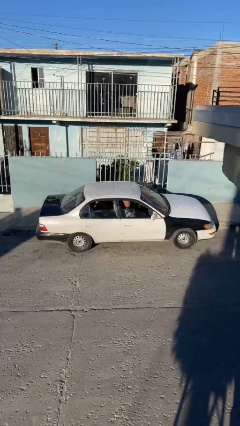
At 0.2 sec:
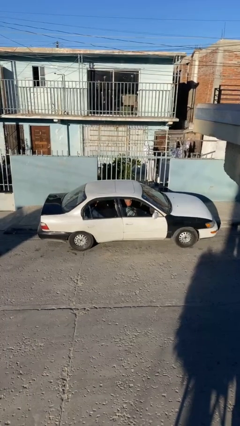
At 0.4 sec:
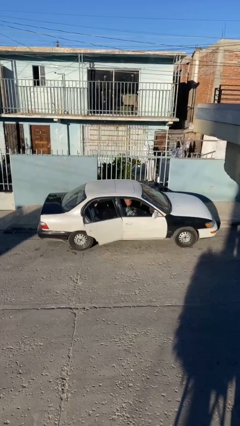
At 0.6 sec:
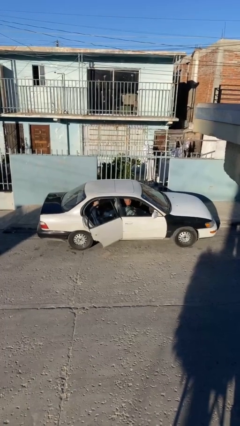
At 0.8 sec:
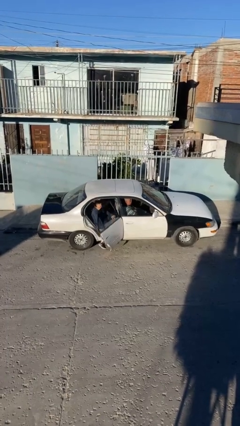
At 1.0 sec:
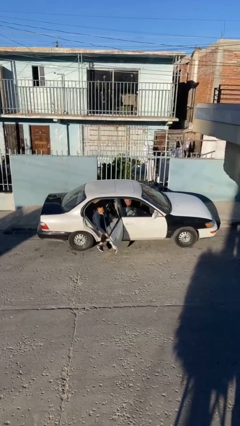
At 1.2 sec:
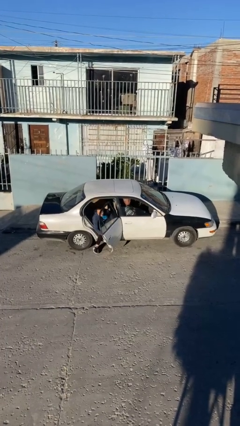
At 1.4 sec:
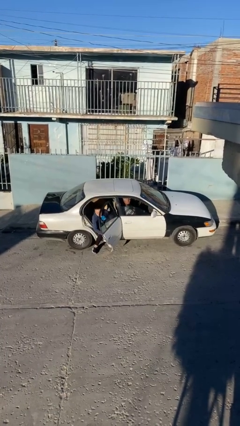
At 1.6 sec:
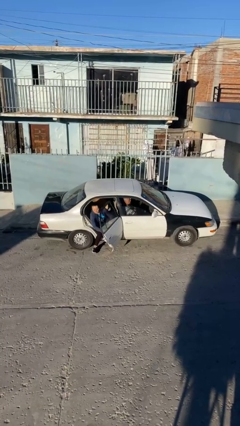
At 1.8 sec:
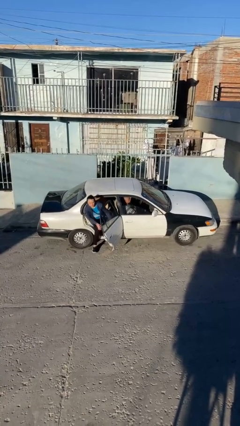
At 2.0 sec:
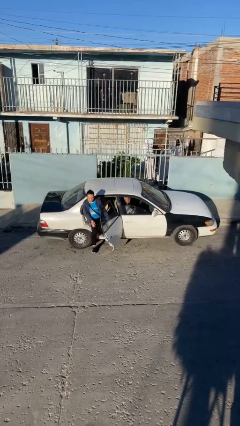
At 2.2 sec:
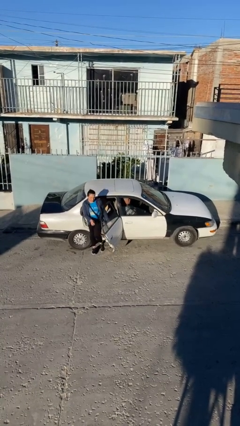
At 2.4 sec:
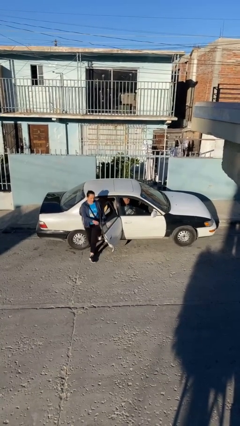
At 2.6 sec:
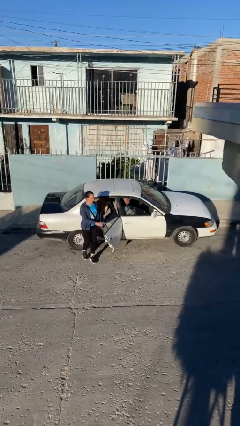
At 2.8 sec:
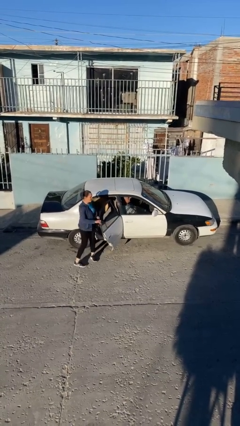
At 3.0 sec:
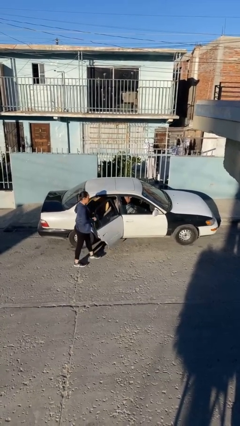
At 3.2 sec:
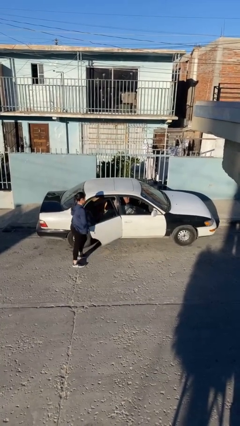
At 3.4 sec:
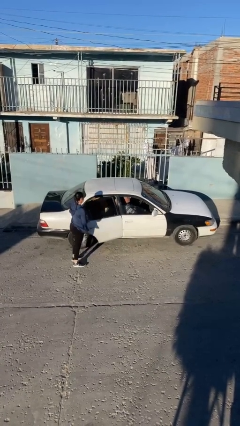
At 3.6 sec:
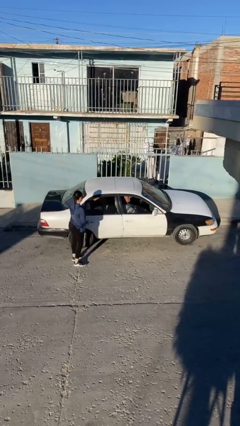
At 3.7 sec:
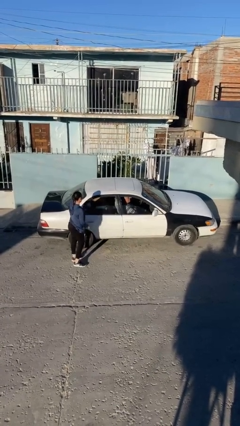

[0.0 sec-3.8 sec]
car drops off person

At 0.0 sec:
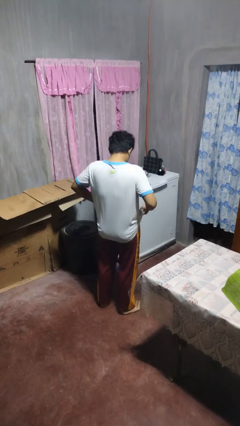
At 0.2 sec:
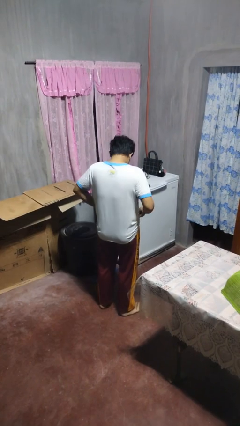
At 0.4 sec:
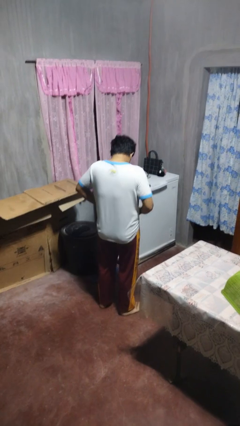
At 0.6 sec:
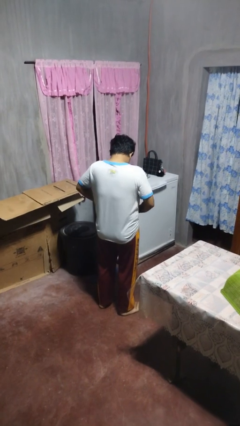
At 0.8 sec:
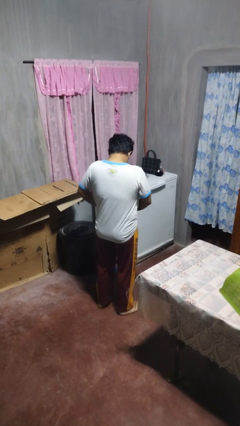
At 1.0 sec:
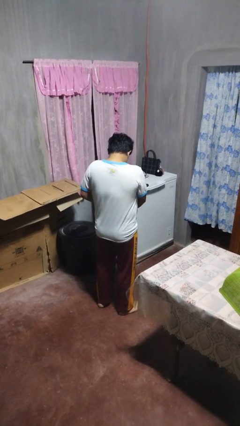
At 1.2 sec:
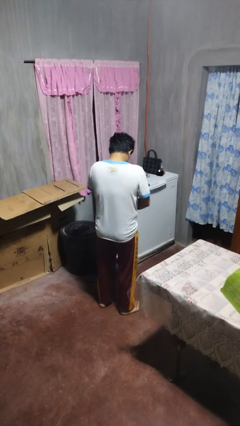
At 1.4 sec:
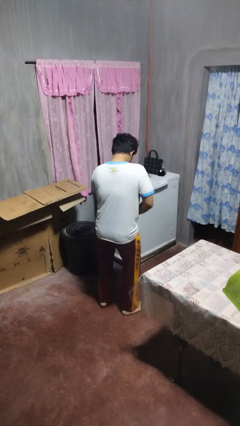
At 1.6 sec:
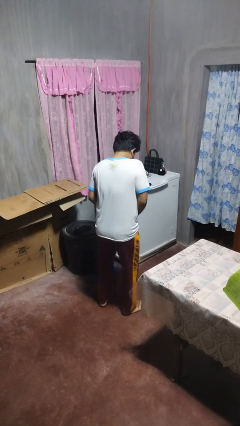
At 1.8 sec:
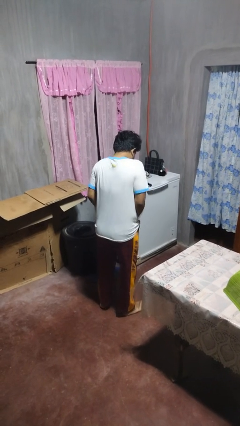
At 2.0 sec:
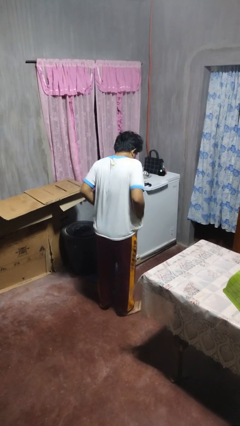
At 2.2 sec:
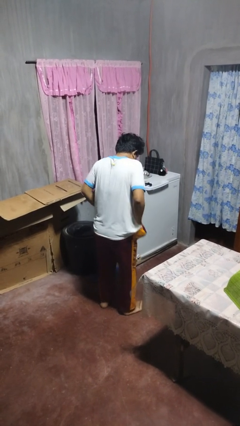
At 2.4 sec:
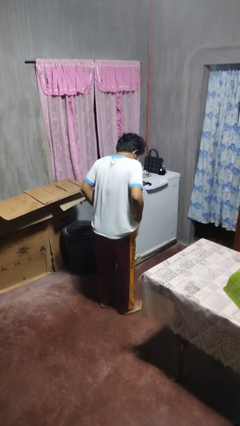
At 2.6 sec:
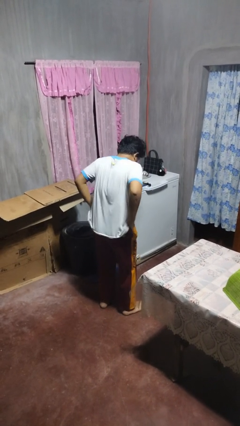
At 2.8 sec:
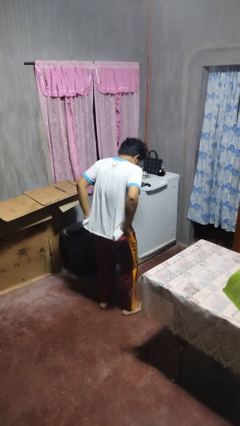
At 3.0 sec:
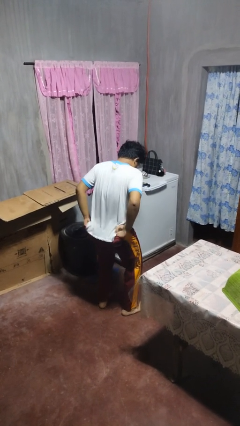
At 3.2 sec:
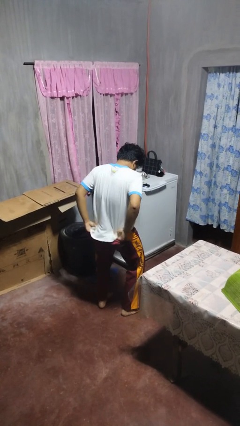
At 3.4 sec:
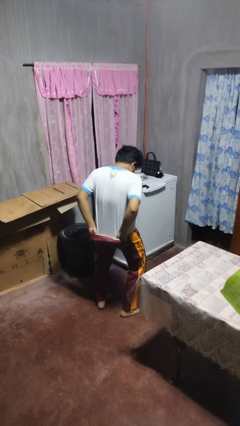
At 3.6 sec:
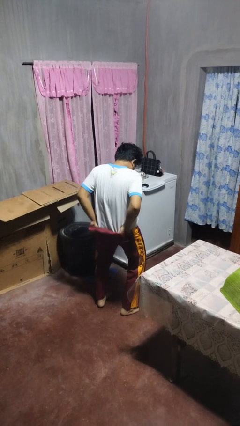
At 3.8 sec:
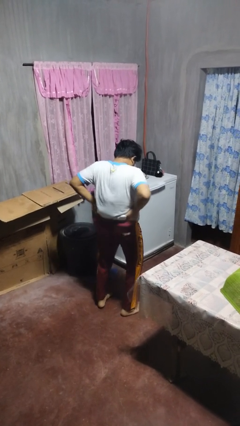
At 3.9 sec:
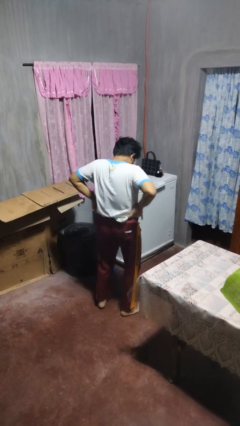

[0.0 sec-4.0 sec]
person tucks in shirt

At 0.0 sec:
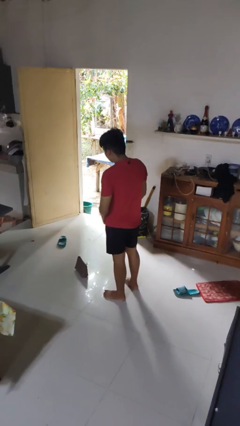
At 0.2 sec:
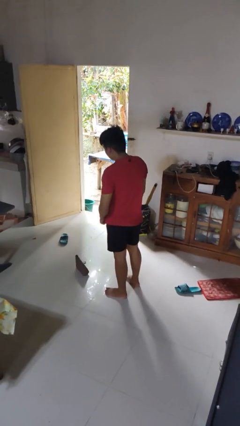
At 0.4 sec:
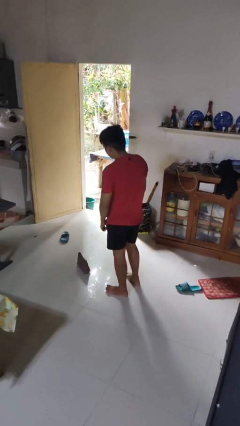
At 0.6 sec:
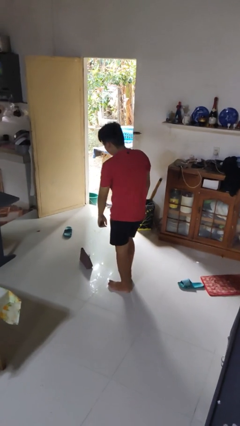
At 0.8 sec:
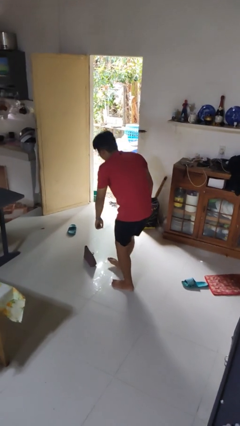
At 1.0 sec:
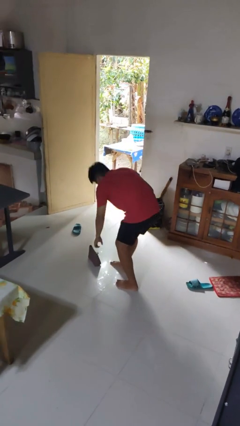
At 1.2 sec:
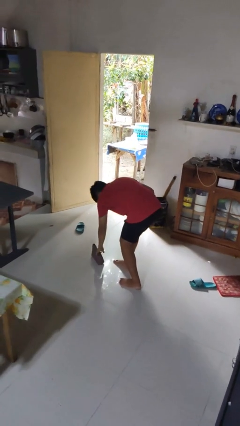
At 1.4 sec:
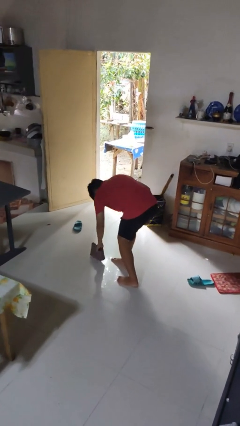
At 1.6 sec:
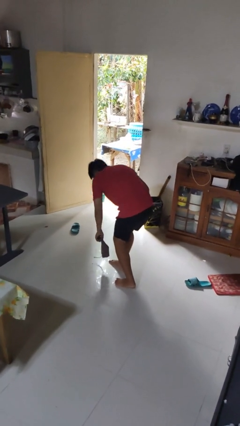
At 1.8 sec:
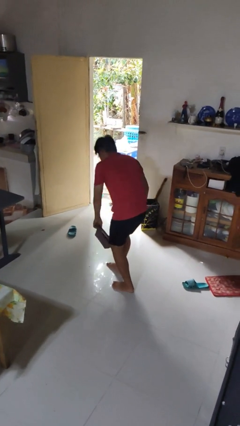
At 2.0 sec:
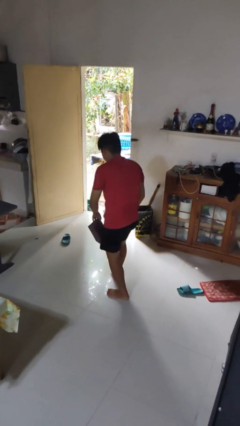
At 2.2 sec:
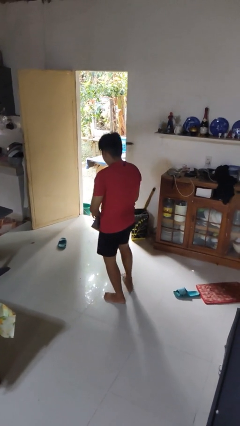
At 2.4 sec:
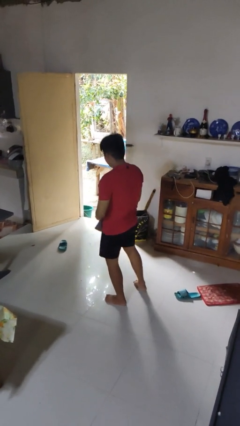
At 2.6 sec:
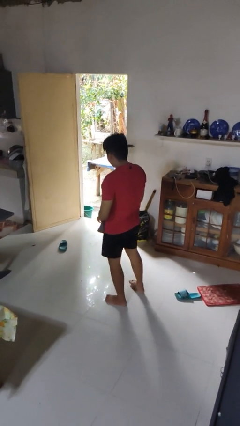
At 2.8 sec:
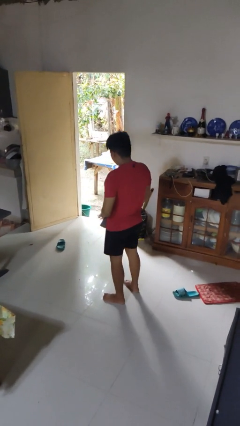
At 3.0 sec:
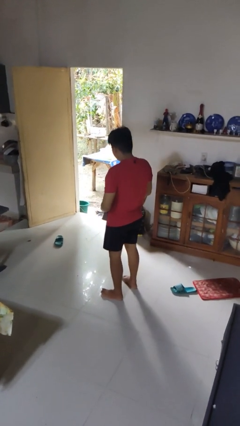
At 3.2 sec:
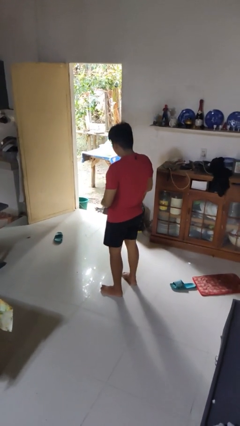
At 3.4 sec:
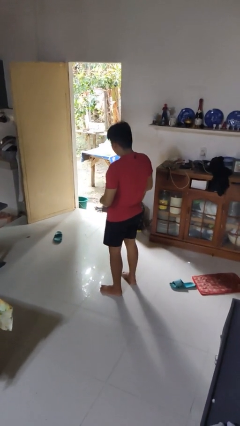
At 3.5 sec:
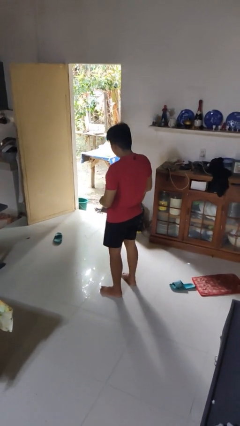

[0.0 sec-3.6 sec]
person picks up object from floor

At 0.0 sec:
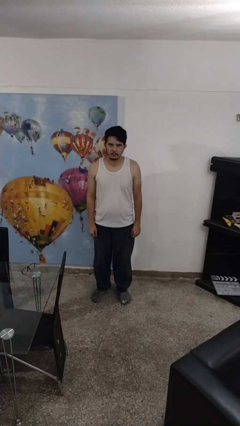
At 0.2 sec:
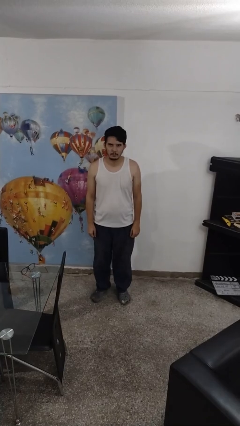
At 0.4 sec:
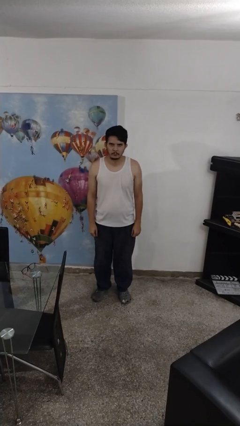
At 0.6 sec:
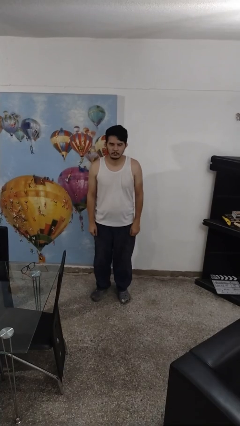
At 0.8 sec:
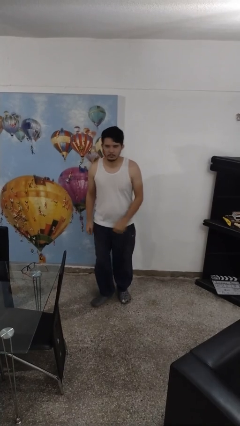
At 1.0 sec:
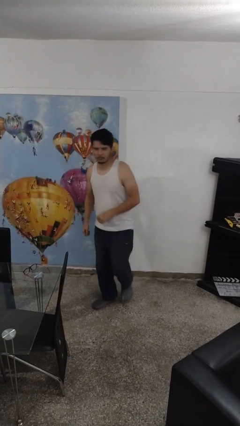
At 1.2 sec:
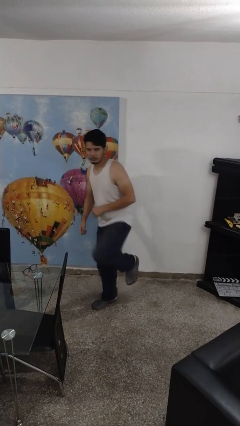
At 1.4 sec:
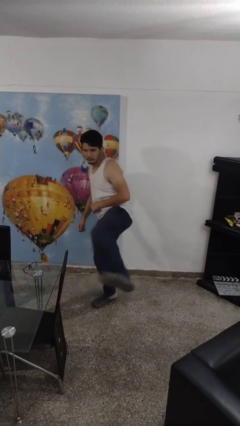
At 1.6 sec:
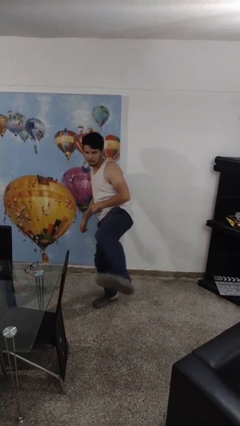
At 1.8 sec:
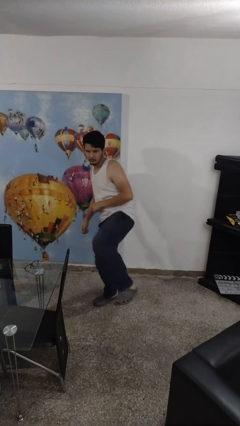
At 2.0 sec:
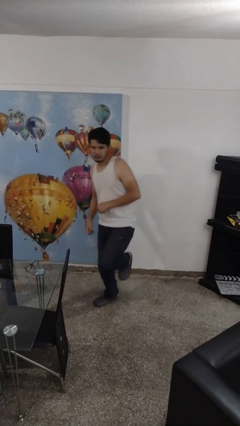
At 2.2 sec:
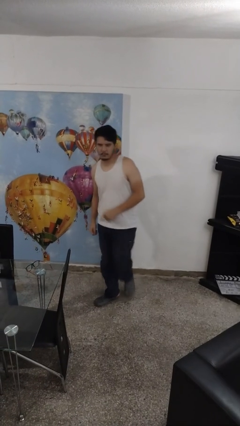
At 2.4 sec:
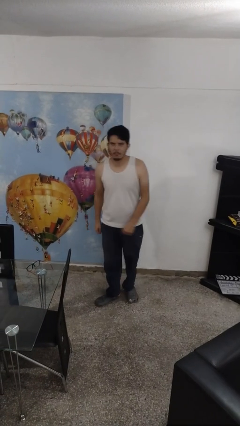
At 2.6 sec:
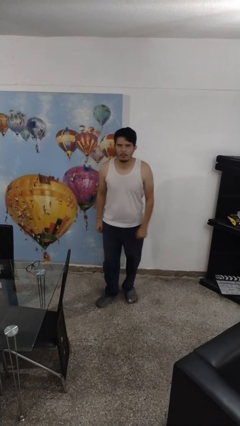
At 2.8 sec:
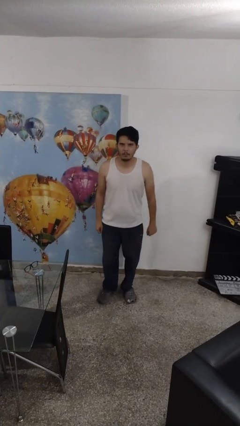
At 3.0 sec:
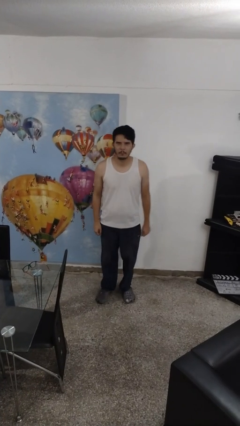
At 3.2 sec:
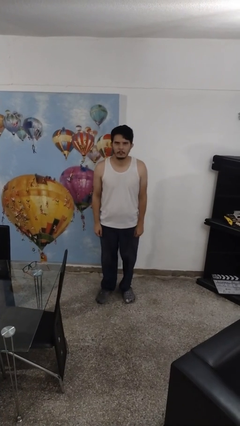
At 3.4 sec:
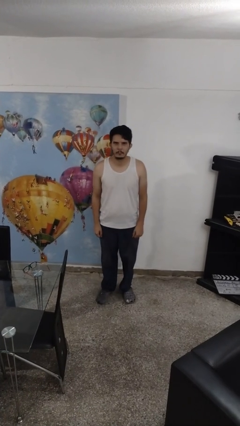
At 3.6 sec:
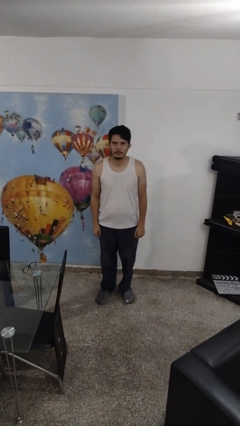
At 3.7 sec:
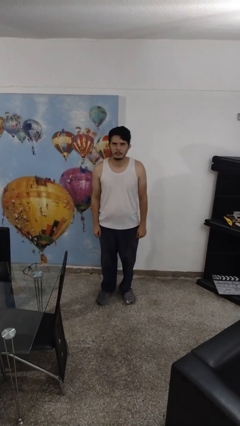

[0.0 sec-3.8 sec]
person karate kicks

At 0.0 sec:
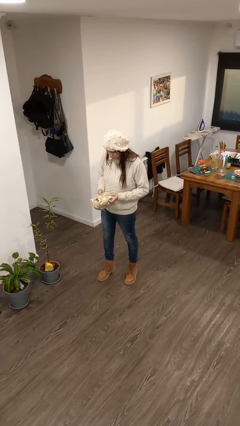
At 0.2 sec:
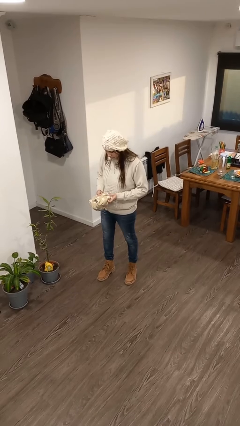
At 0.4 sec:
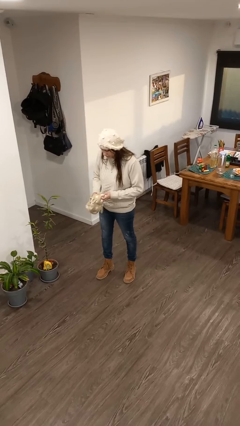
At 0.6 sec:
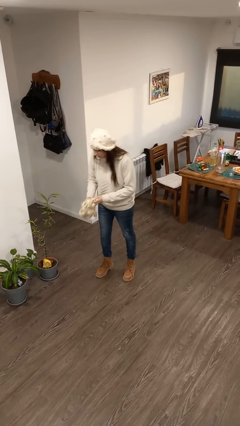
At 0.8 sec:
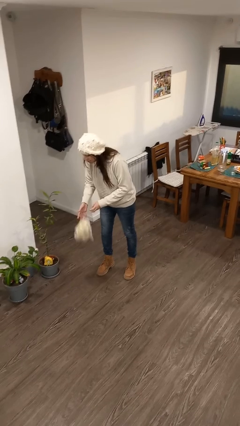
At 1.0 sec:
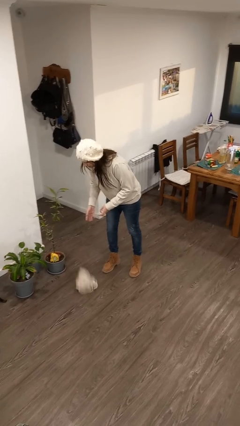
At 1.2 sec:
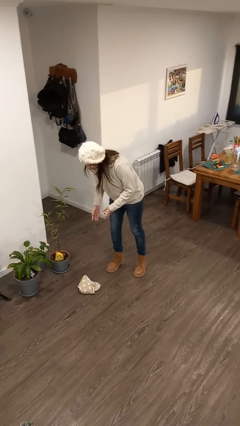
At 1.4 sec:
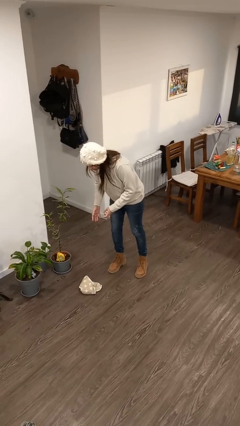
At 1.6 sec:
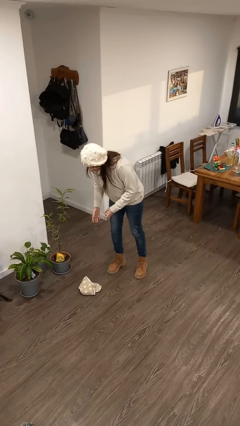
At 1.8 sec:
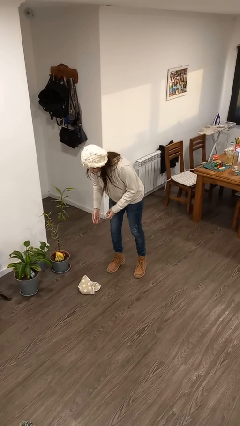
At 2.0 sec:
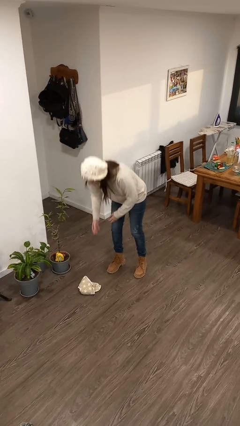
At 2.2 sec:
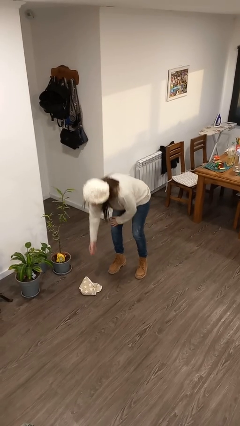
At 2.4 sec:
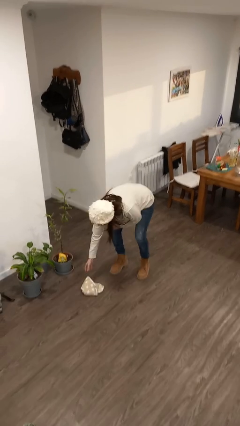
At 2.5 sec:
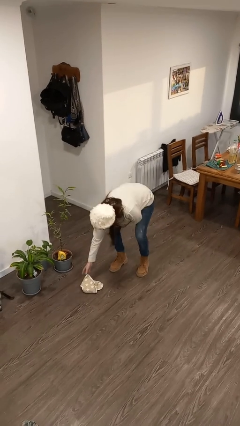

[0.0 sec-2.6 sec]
person drops object
